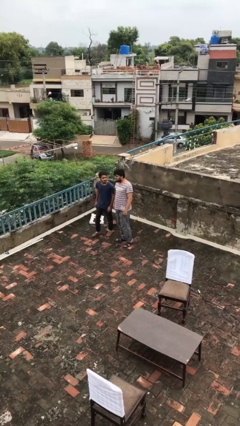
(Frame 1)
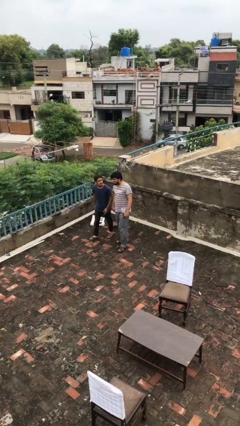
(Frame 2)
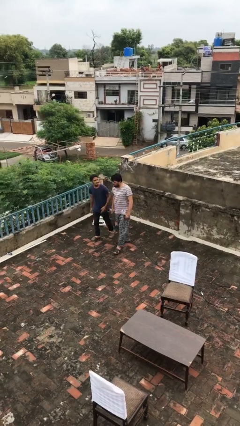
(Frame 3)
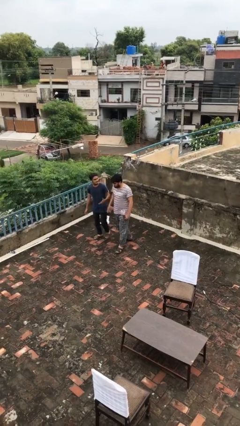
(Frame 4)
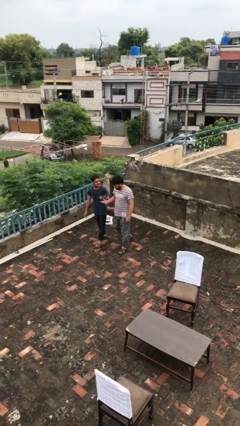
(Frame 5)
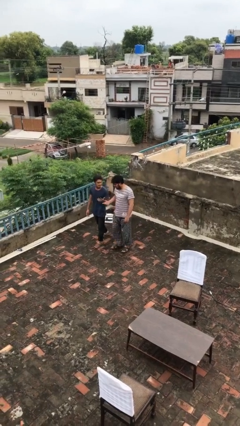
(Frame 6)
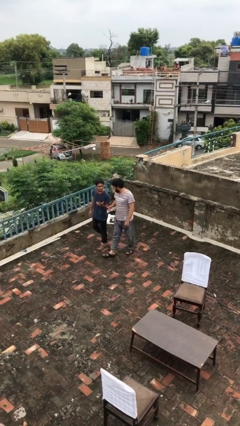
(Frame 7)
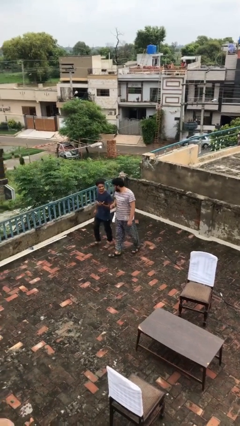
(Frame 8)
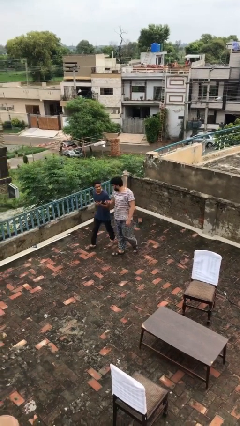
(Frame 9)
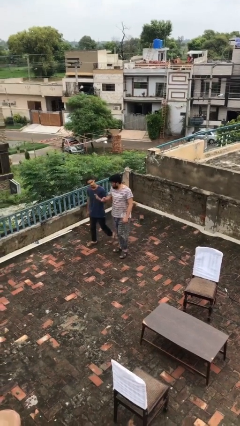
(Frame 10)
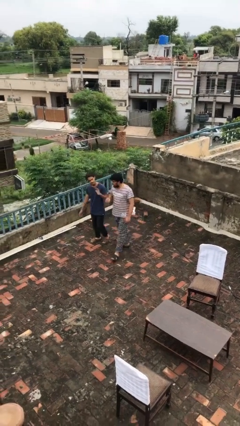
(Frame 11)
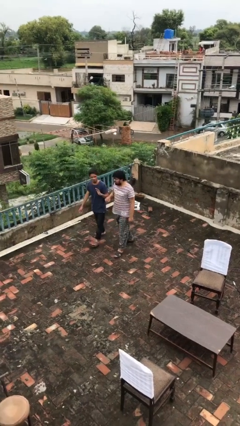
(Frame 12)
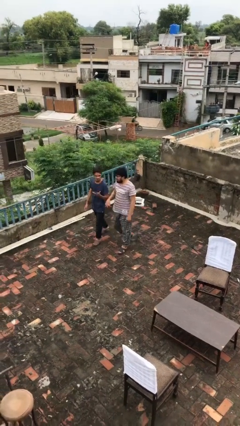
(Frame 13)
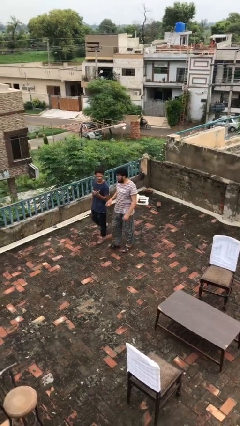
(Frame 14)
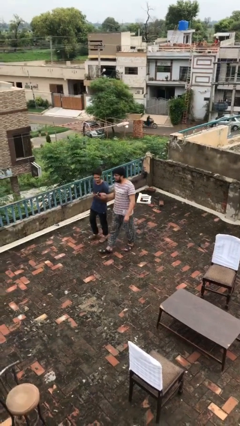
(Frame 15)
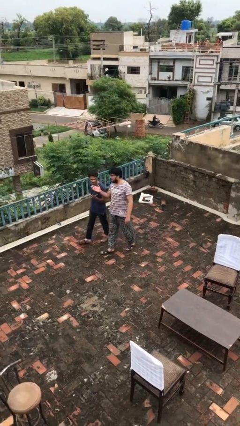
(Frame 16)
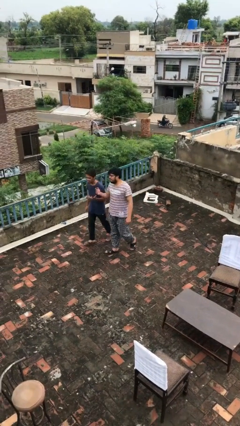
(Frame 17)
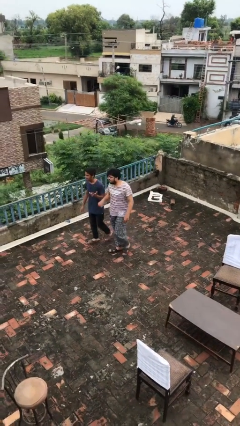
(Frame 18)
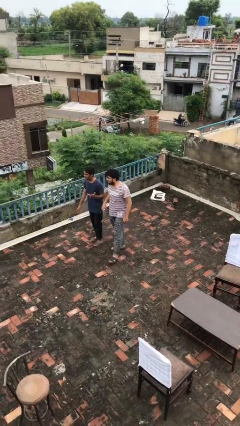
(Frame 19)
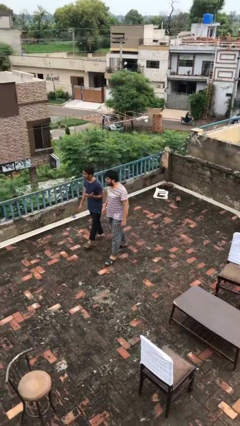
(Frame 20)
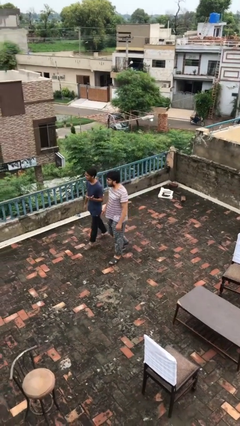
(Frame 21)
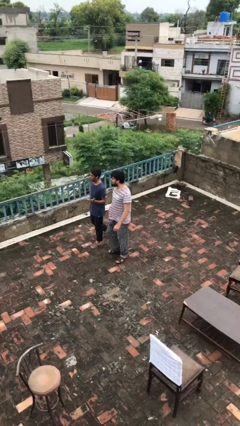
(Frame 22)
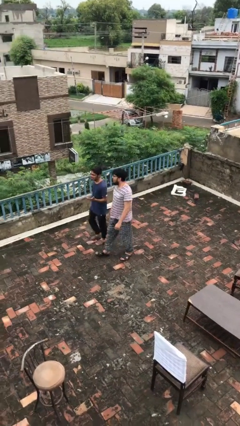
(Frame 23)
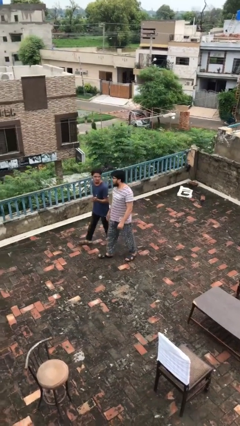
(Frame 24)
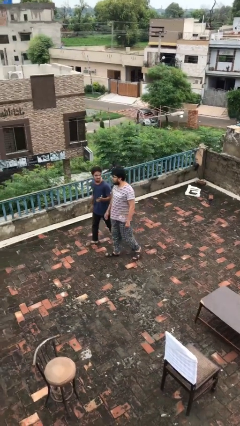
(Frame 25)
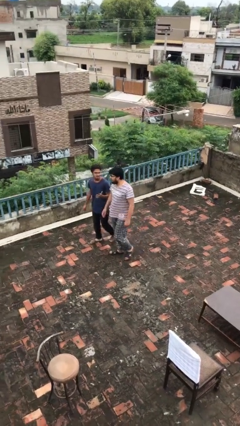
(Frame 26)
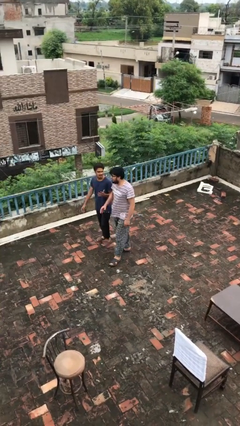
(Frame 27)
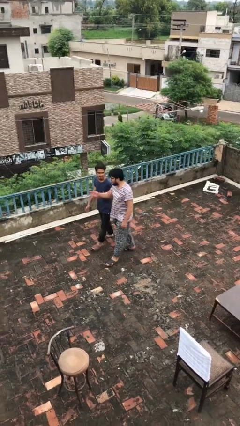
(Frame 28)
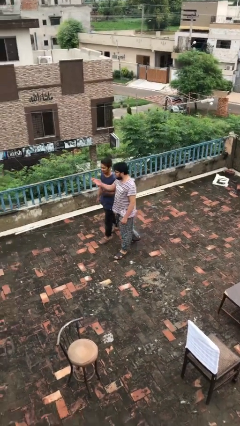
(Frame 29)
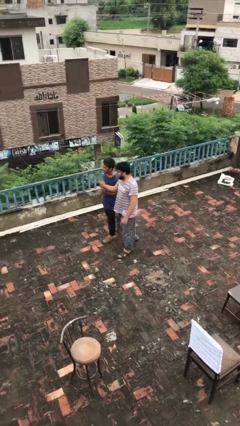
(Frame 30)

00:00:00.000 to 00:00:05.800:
person talks to person

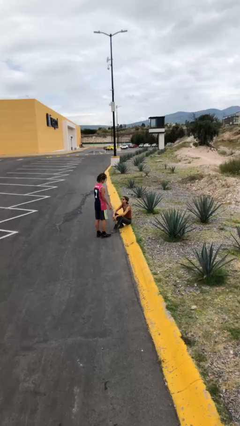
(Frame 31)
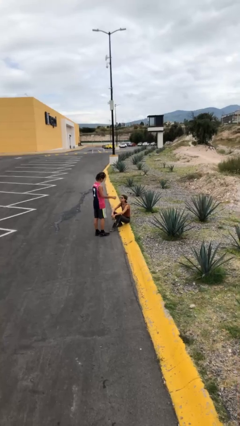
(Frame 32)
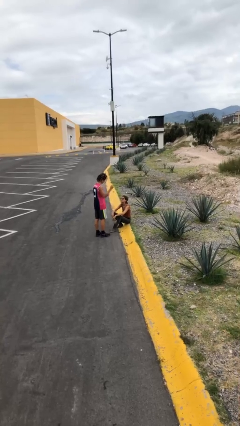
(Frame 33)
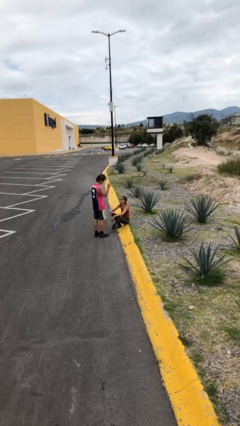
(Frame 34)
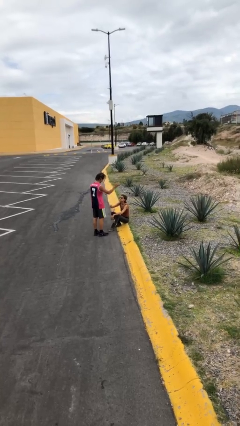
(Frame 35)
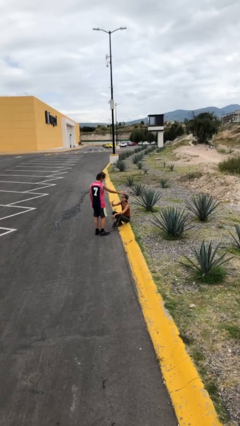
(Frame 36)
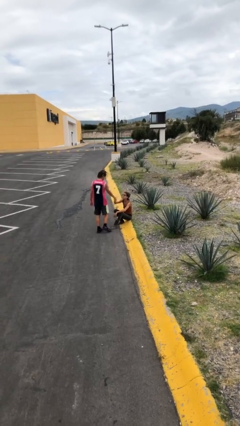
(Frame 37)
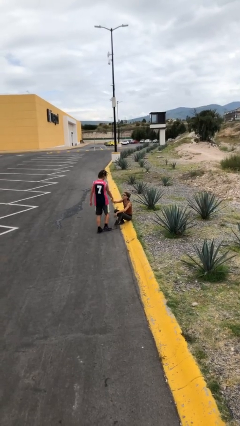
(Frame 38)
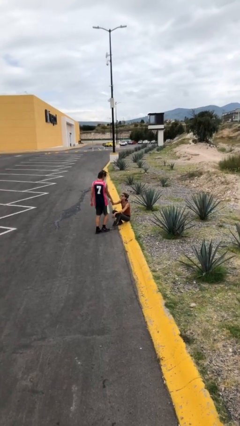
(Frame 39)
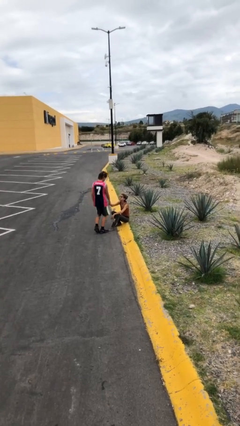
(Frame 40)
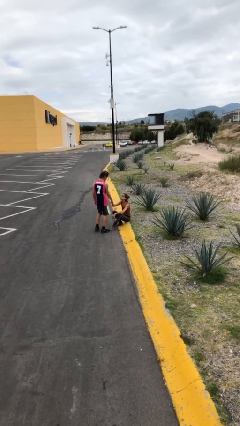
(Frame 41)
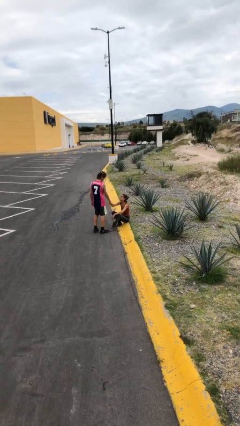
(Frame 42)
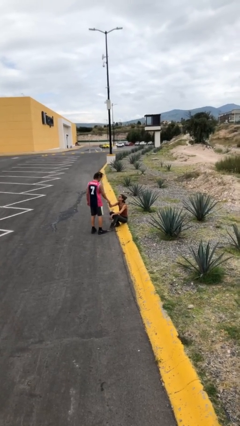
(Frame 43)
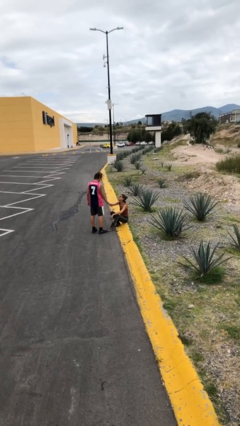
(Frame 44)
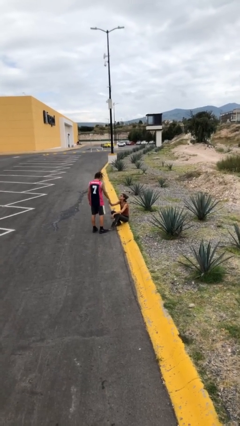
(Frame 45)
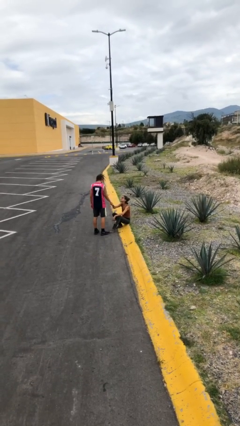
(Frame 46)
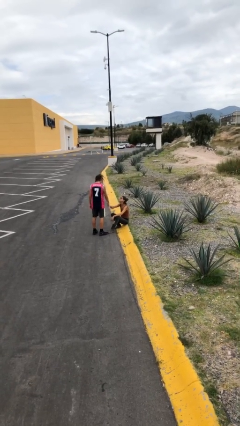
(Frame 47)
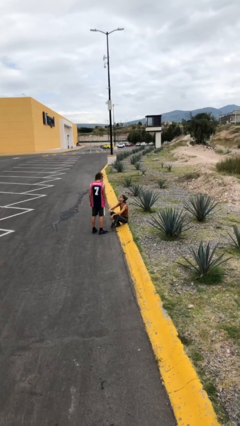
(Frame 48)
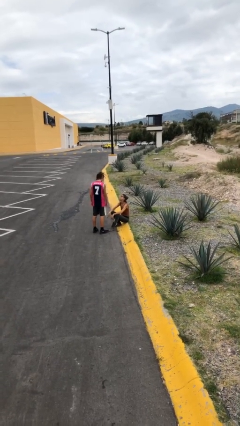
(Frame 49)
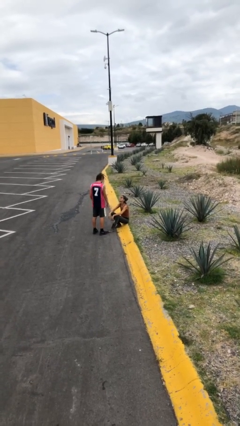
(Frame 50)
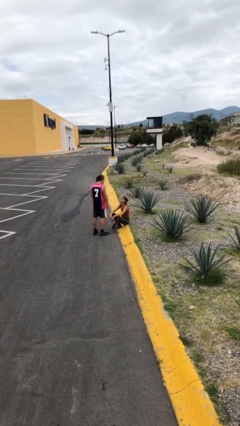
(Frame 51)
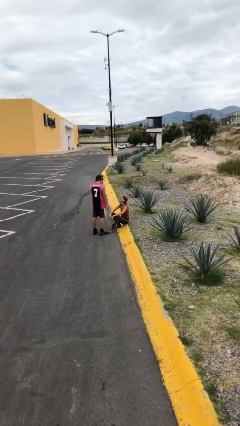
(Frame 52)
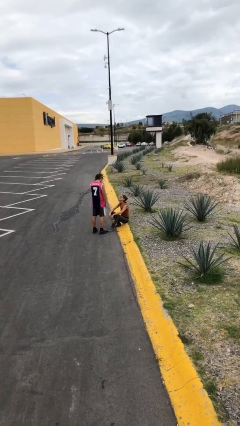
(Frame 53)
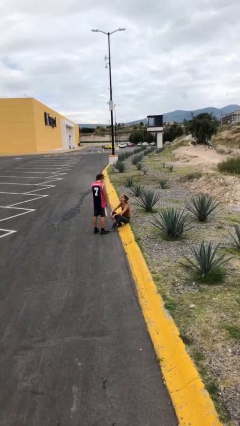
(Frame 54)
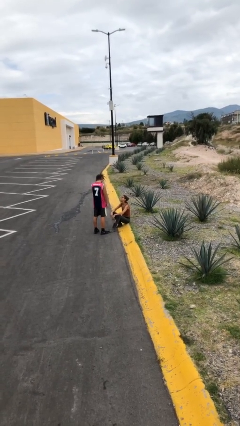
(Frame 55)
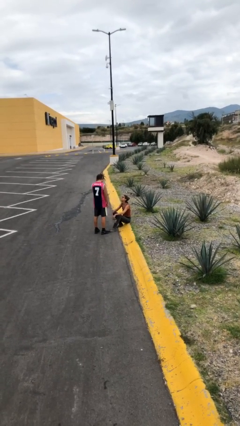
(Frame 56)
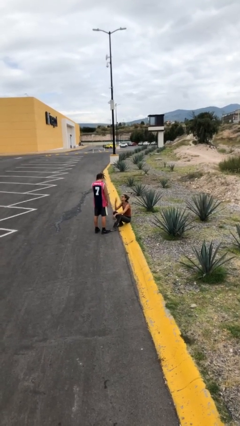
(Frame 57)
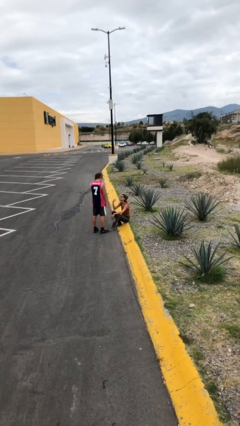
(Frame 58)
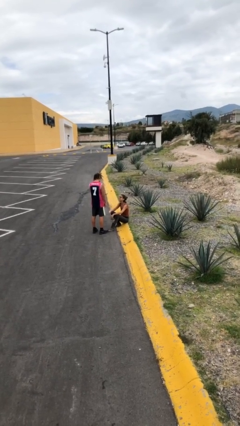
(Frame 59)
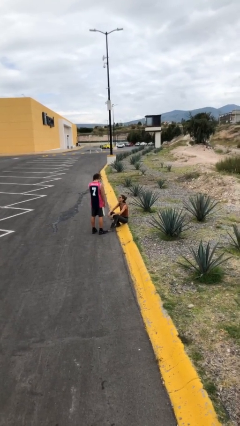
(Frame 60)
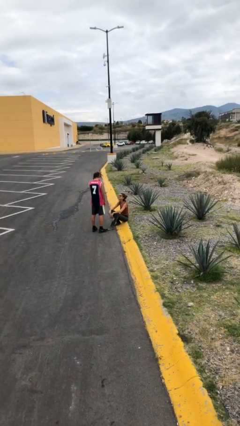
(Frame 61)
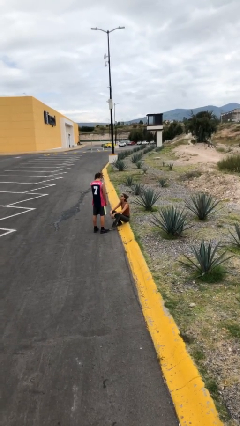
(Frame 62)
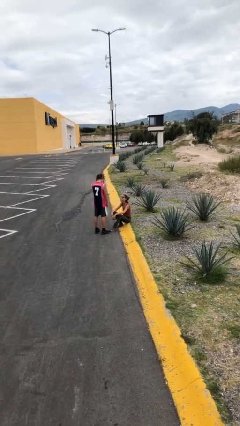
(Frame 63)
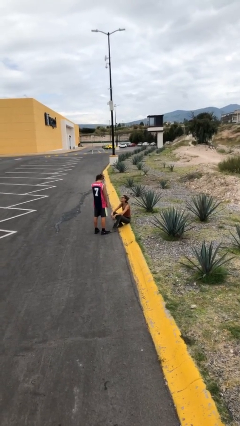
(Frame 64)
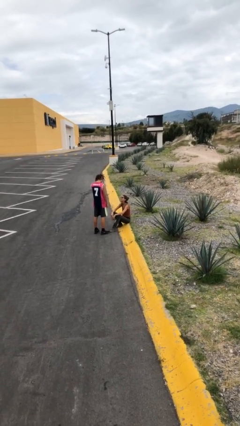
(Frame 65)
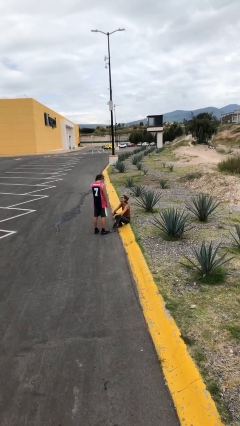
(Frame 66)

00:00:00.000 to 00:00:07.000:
person shakes hand

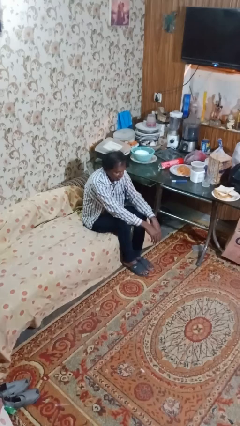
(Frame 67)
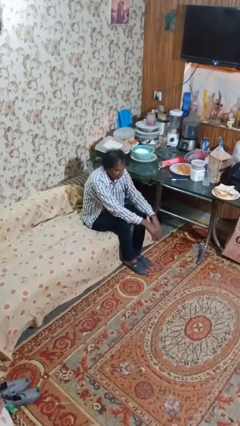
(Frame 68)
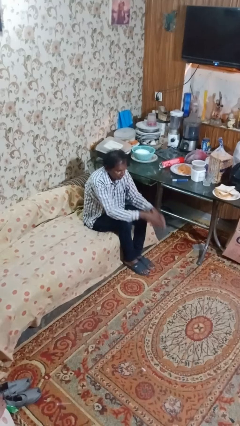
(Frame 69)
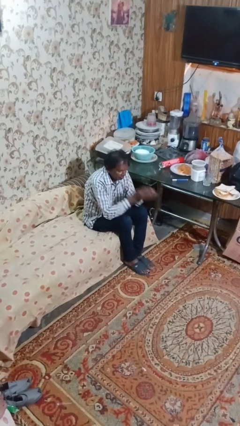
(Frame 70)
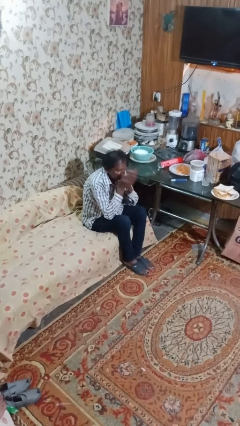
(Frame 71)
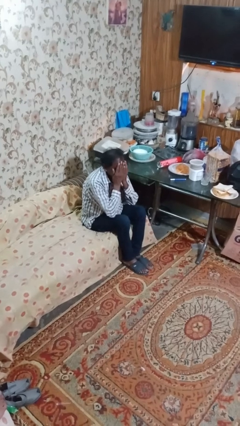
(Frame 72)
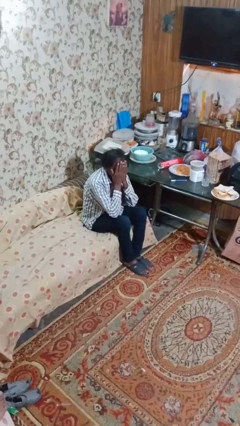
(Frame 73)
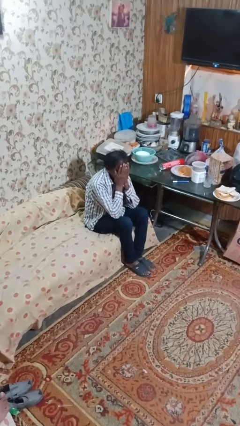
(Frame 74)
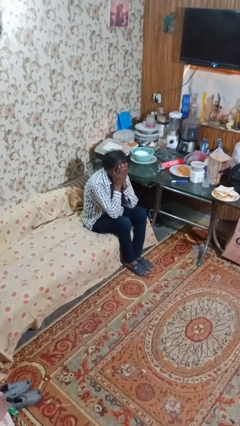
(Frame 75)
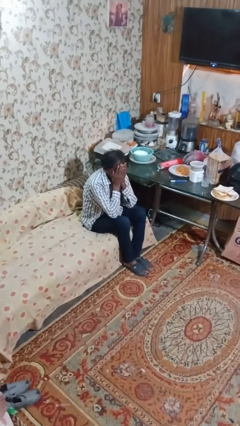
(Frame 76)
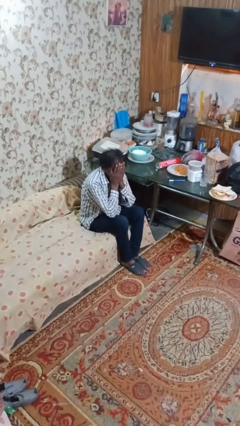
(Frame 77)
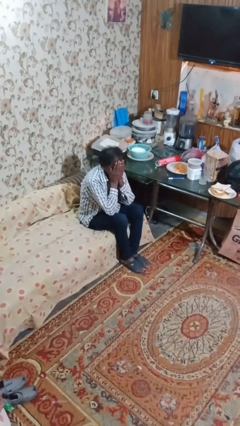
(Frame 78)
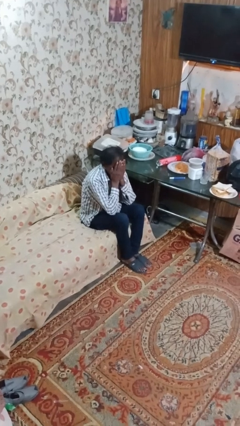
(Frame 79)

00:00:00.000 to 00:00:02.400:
person covers face with hands

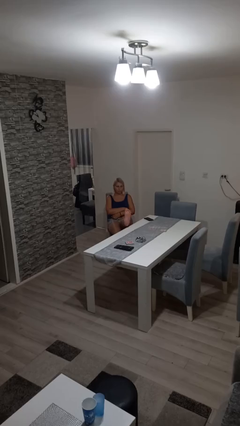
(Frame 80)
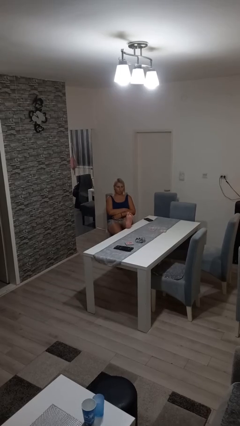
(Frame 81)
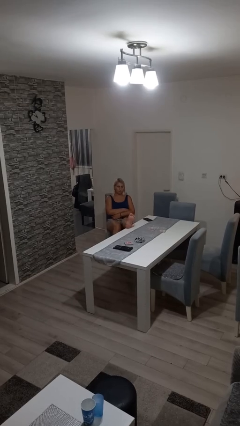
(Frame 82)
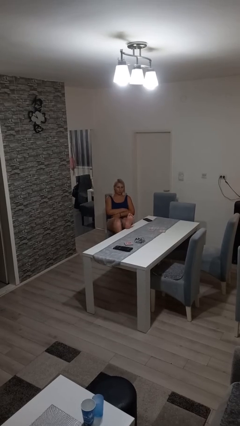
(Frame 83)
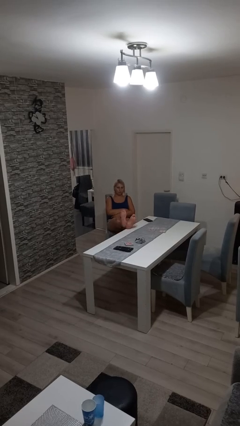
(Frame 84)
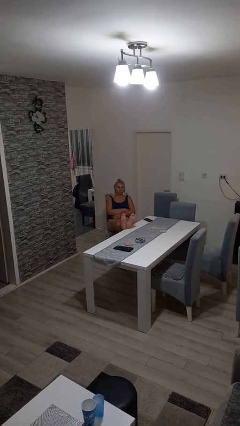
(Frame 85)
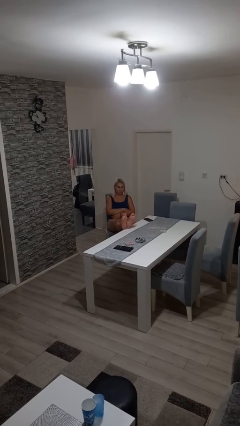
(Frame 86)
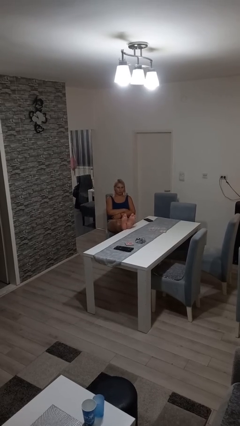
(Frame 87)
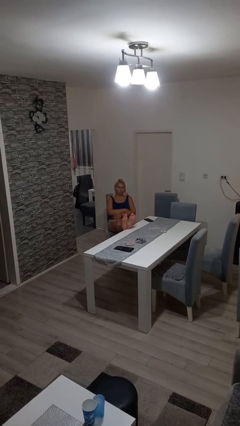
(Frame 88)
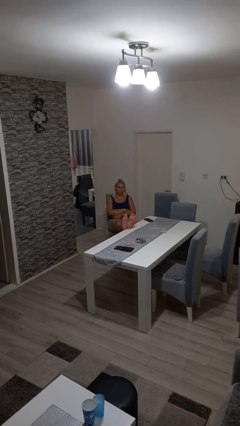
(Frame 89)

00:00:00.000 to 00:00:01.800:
person puts feet up

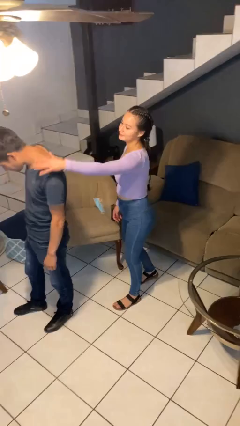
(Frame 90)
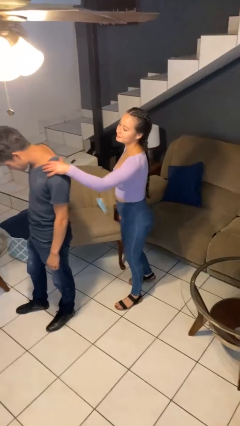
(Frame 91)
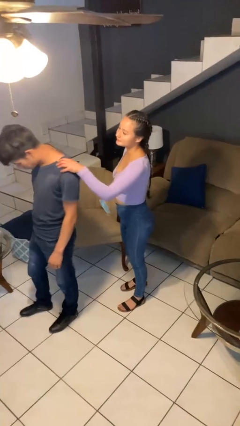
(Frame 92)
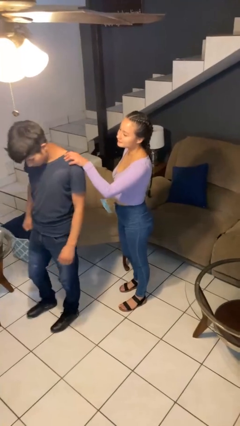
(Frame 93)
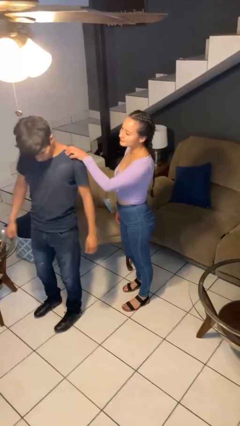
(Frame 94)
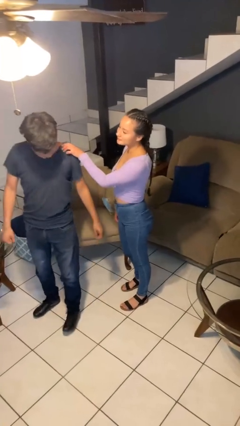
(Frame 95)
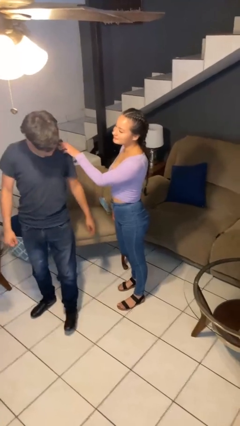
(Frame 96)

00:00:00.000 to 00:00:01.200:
person grabs person by shoulder
